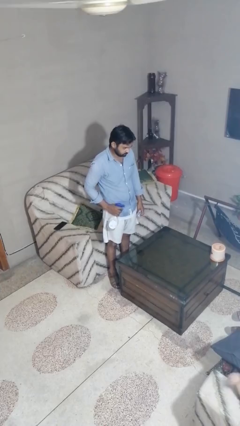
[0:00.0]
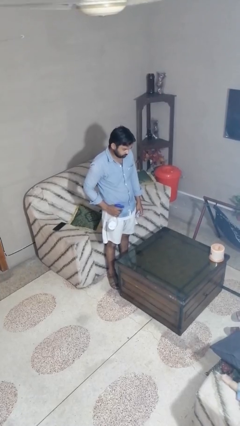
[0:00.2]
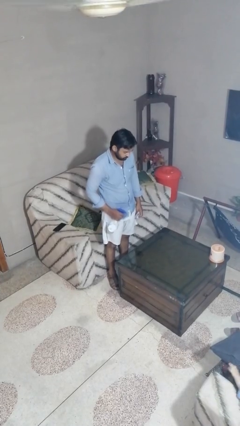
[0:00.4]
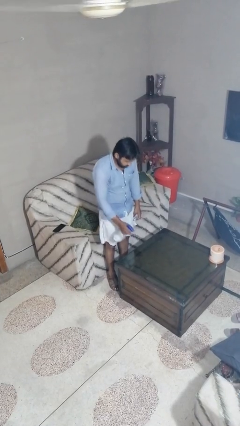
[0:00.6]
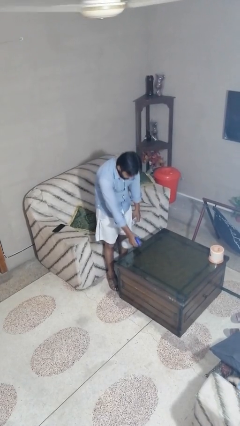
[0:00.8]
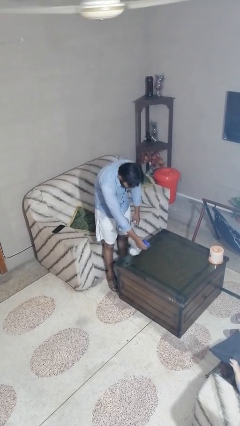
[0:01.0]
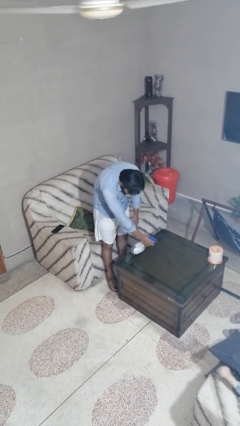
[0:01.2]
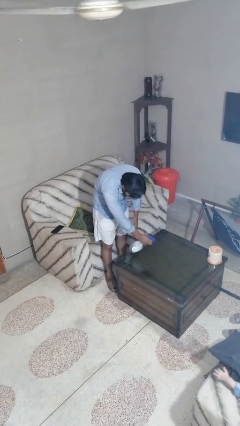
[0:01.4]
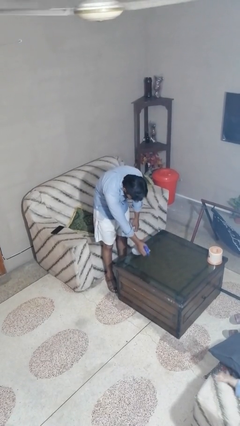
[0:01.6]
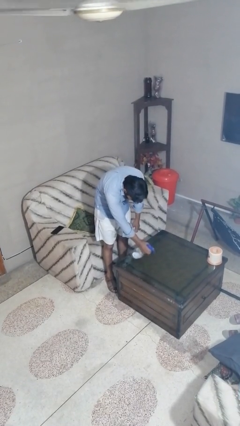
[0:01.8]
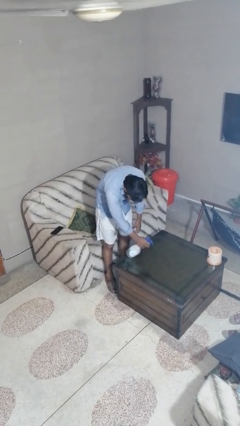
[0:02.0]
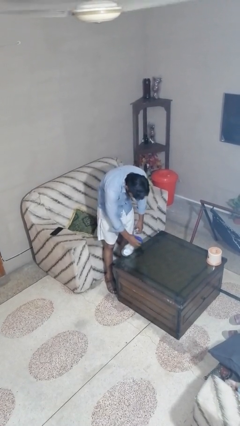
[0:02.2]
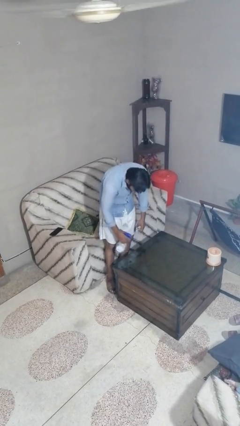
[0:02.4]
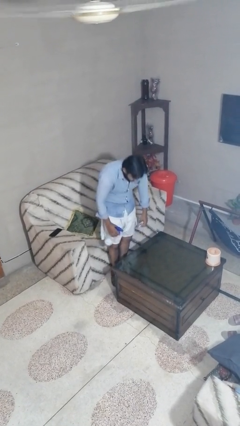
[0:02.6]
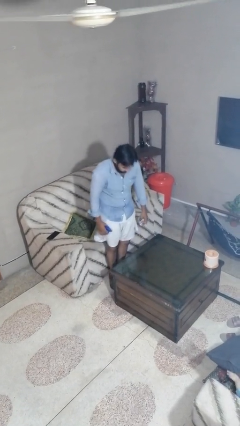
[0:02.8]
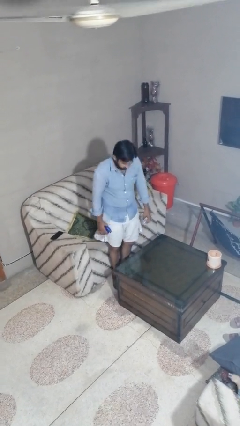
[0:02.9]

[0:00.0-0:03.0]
person sprays from bottle

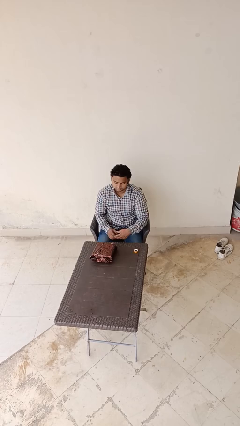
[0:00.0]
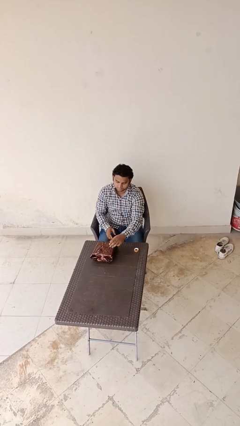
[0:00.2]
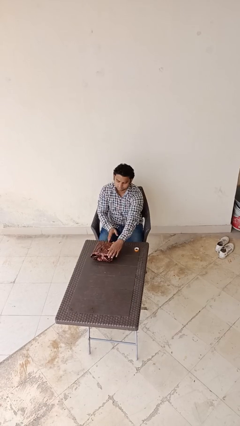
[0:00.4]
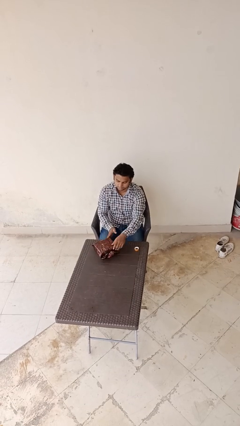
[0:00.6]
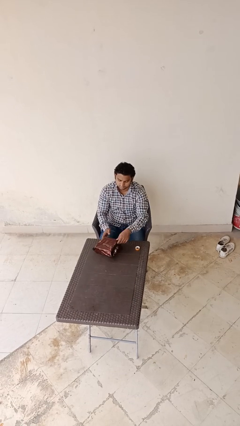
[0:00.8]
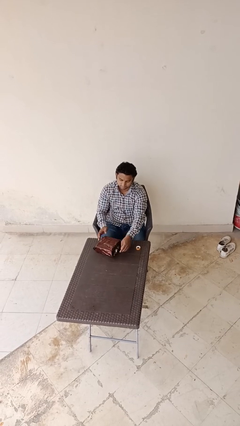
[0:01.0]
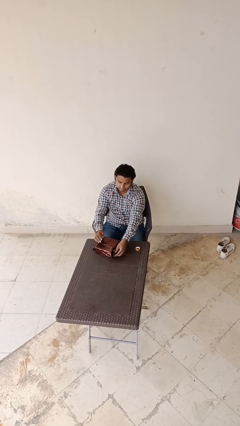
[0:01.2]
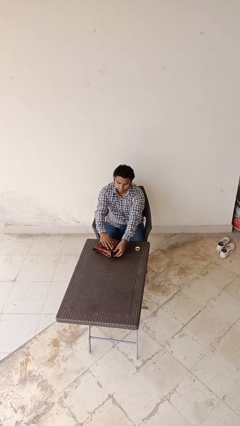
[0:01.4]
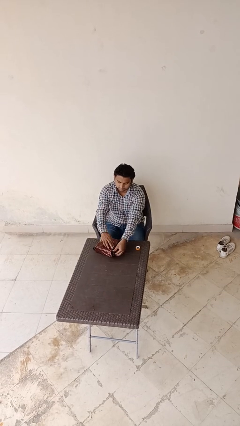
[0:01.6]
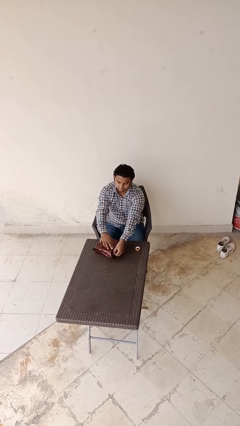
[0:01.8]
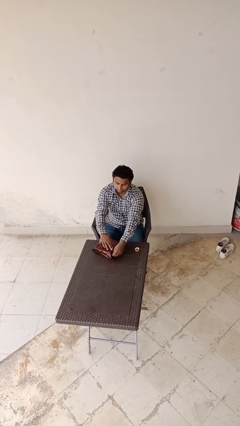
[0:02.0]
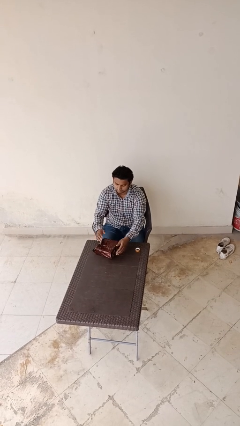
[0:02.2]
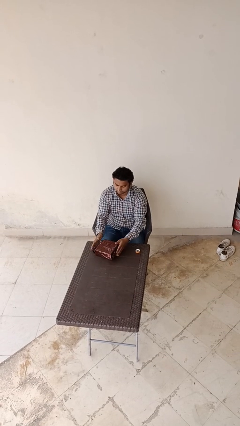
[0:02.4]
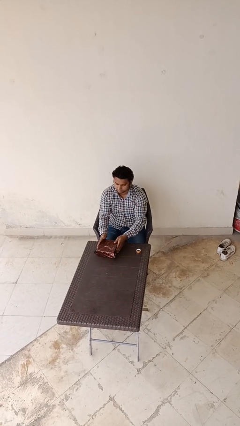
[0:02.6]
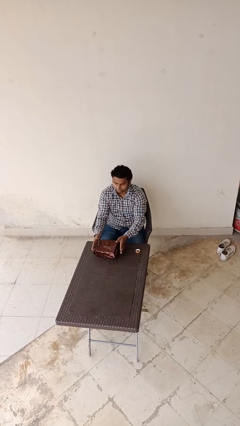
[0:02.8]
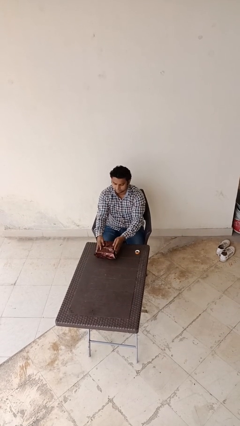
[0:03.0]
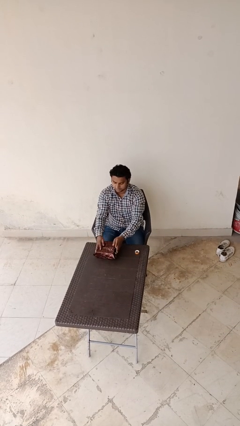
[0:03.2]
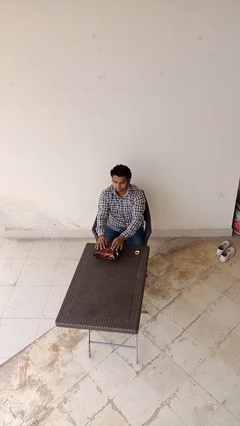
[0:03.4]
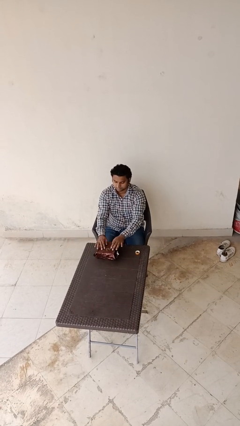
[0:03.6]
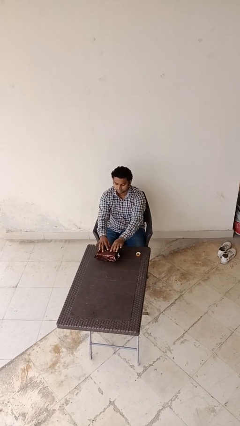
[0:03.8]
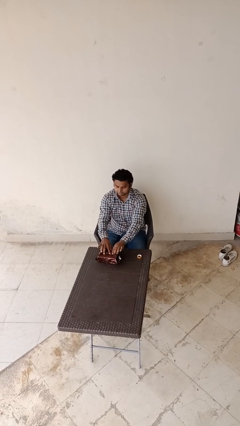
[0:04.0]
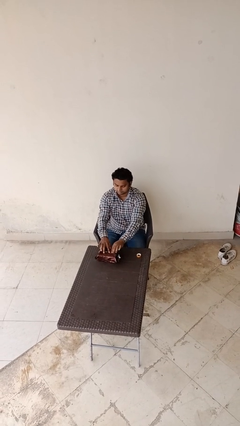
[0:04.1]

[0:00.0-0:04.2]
person wraps box

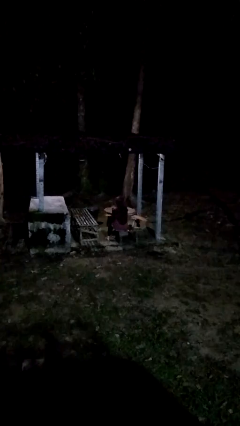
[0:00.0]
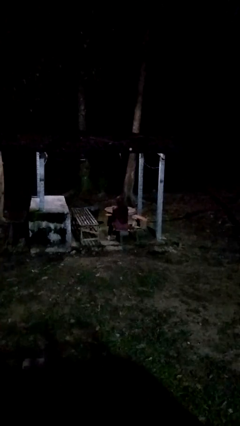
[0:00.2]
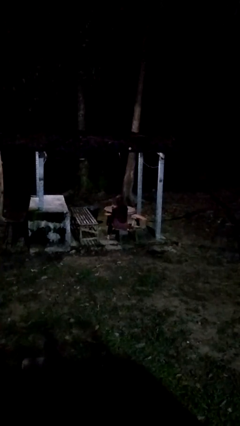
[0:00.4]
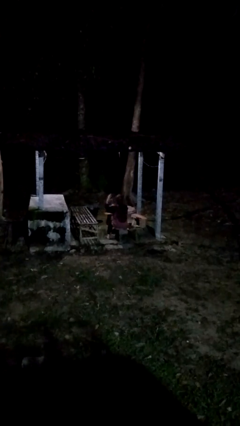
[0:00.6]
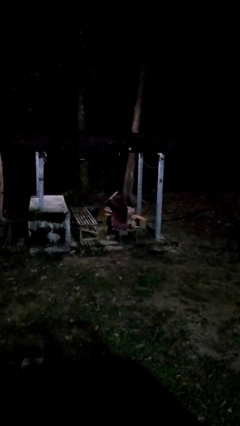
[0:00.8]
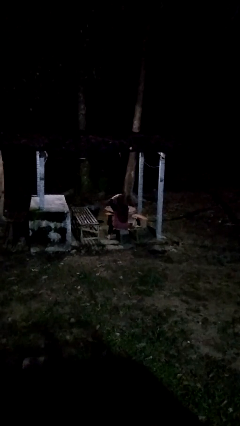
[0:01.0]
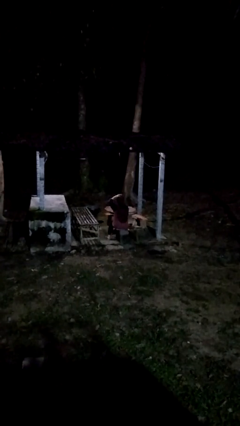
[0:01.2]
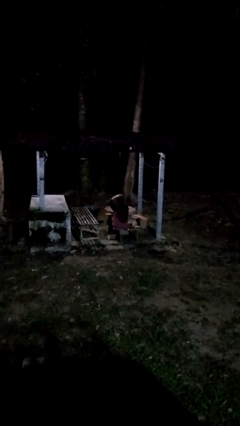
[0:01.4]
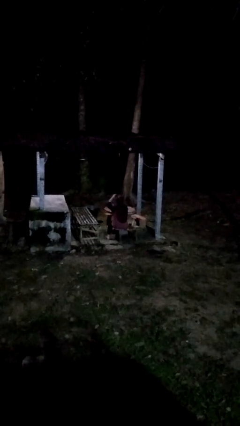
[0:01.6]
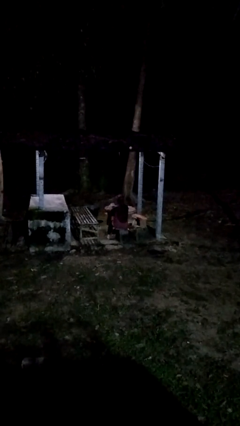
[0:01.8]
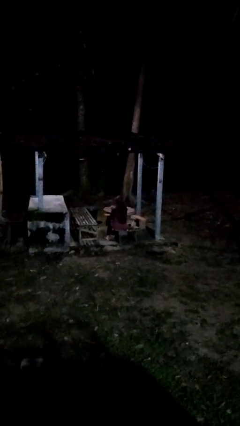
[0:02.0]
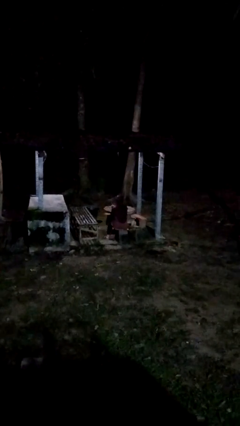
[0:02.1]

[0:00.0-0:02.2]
person pats head

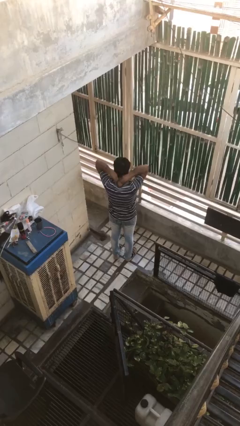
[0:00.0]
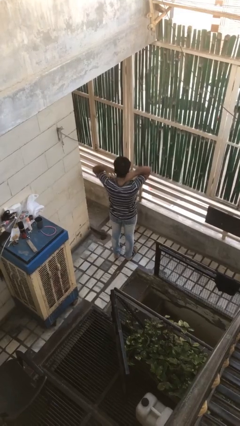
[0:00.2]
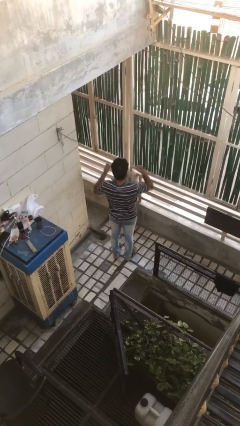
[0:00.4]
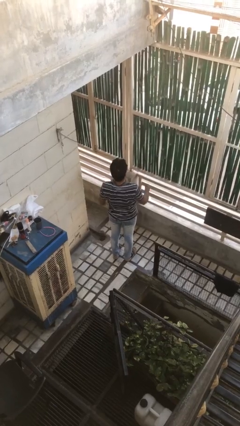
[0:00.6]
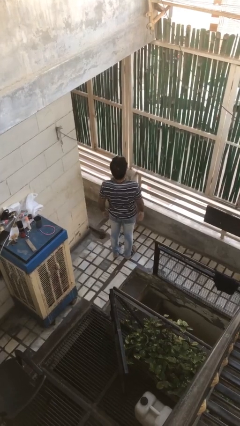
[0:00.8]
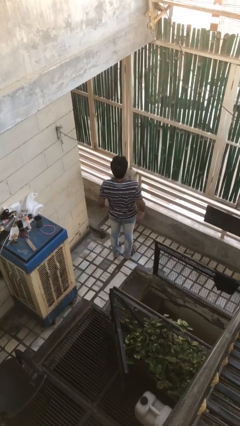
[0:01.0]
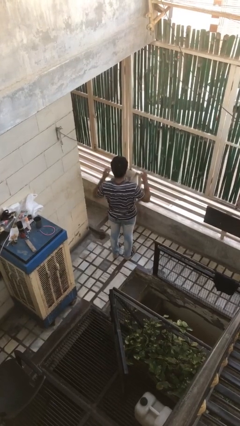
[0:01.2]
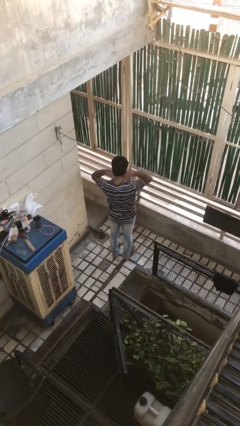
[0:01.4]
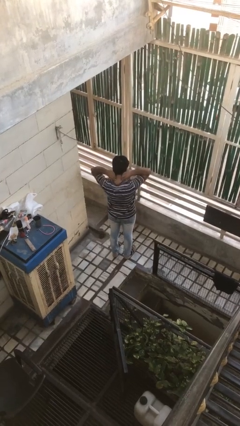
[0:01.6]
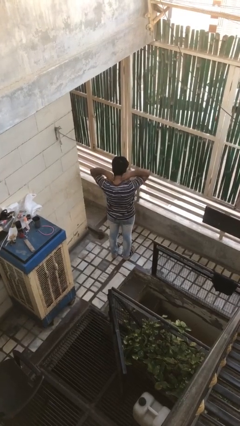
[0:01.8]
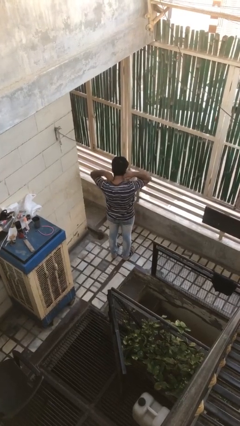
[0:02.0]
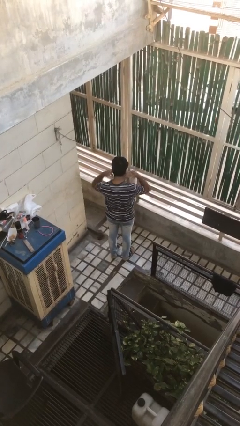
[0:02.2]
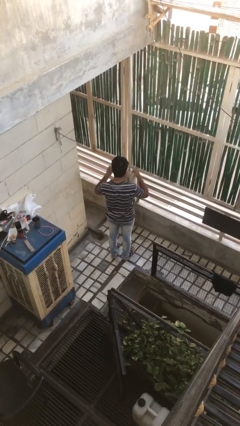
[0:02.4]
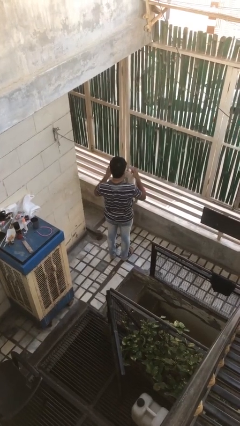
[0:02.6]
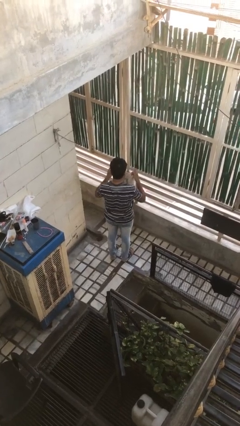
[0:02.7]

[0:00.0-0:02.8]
person takes off necklace

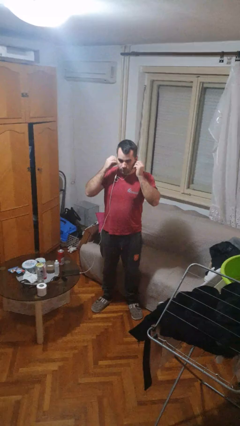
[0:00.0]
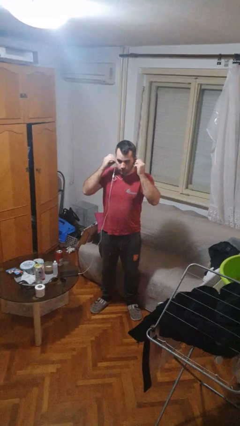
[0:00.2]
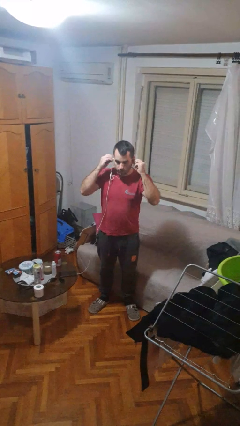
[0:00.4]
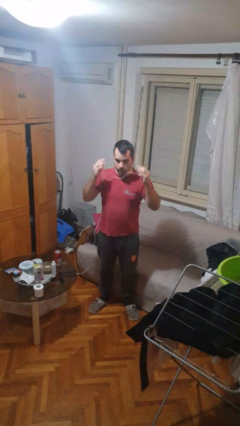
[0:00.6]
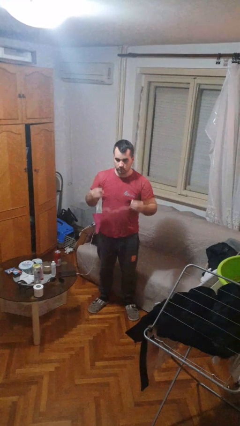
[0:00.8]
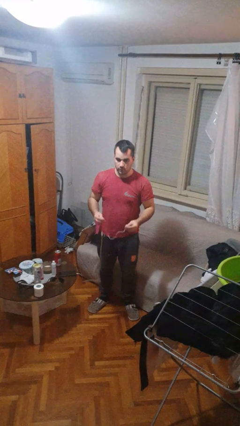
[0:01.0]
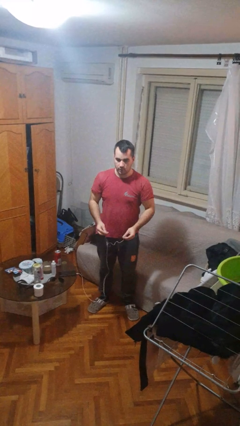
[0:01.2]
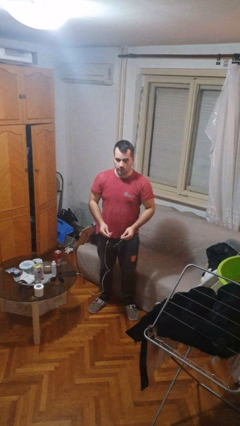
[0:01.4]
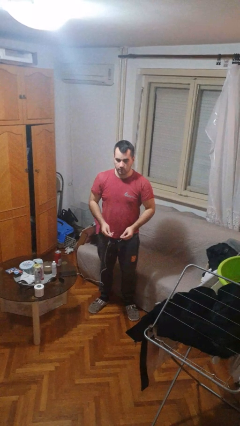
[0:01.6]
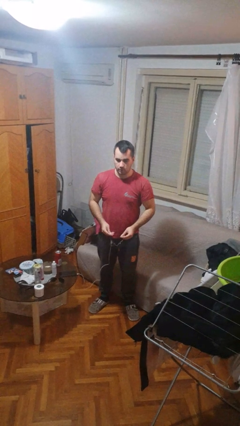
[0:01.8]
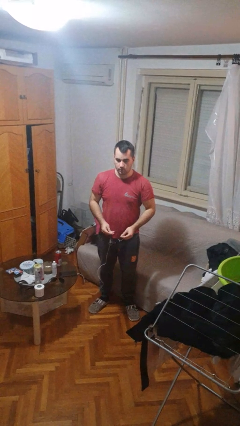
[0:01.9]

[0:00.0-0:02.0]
person takes off headphones

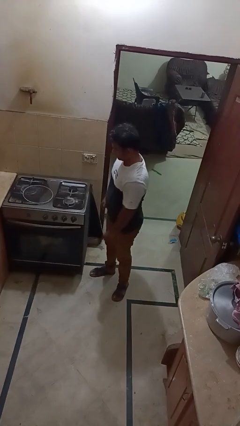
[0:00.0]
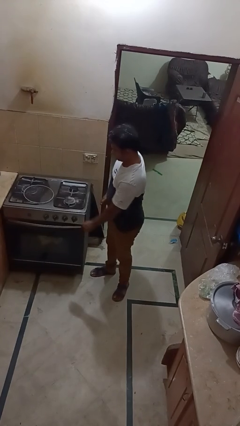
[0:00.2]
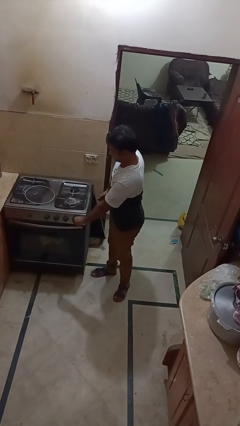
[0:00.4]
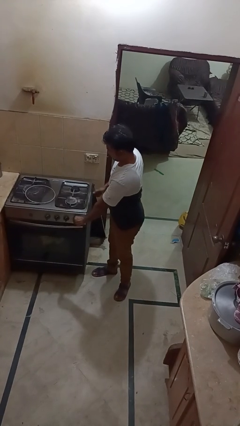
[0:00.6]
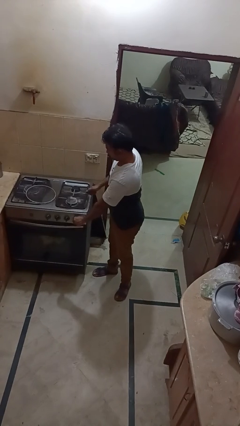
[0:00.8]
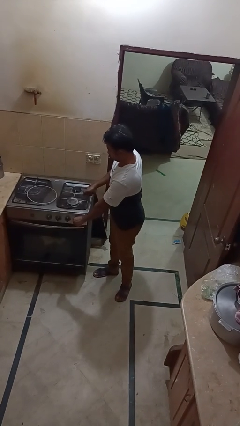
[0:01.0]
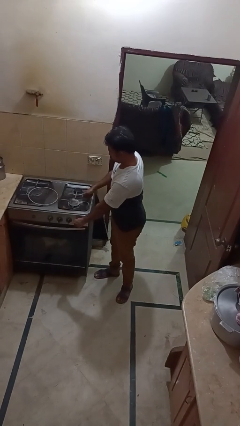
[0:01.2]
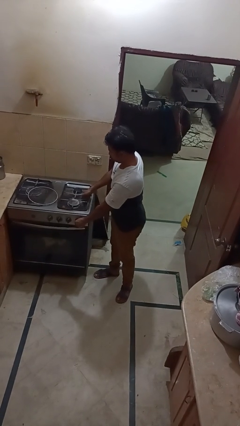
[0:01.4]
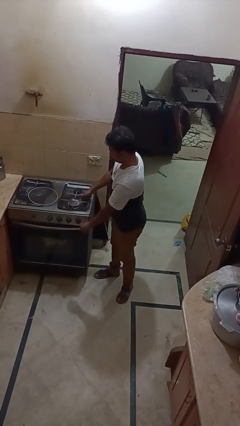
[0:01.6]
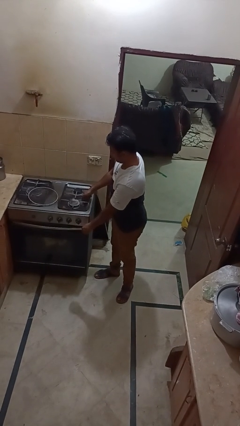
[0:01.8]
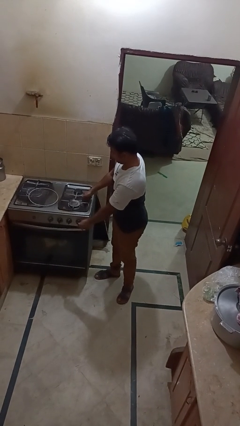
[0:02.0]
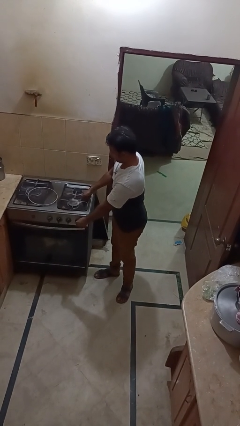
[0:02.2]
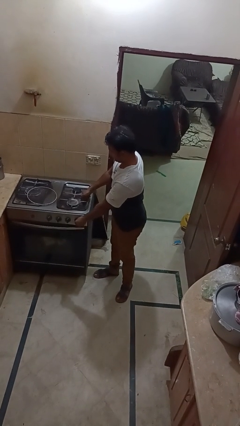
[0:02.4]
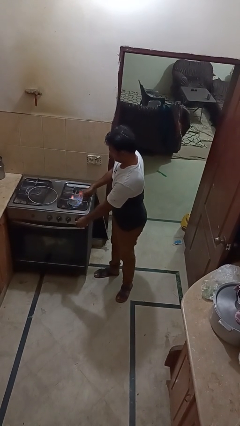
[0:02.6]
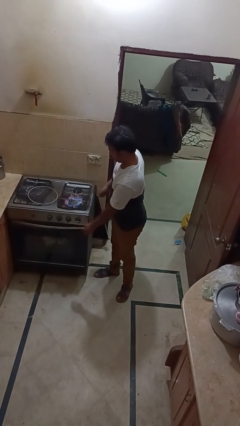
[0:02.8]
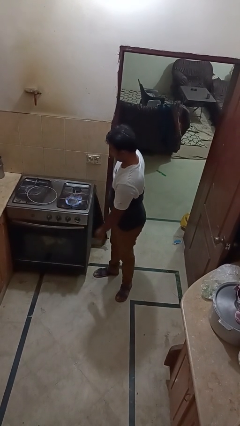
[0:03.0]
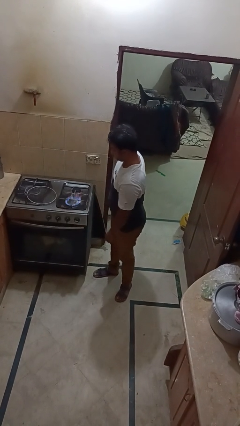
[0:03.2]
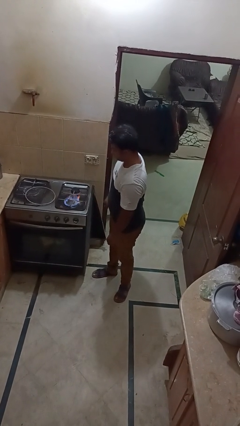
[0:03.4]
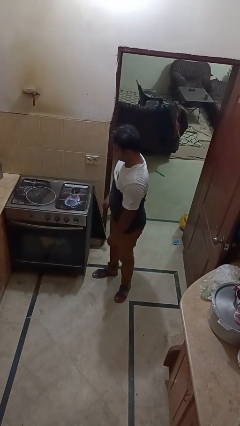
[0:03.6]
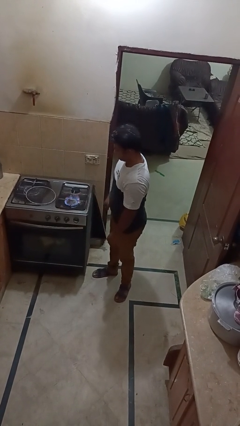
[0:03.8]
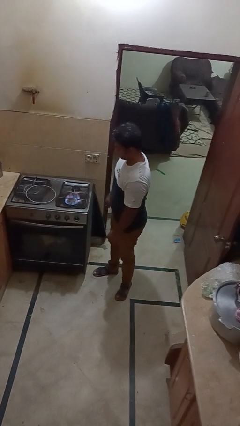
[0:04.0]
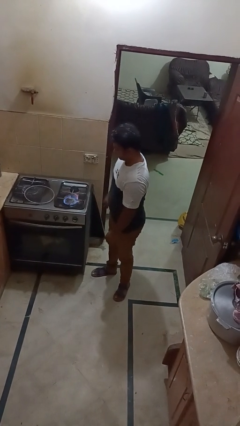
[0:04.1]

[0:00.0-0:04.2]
person turns on stovetop
